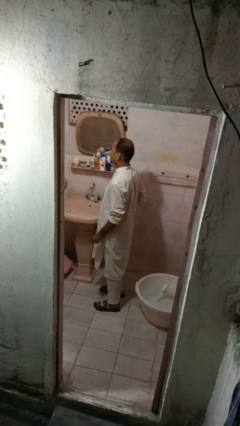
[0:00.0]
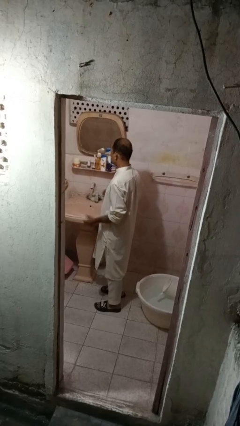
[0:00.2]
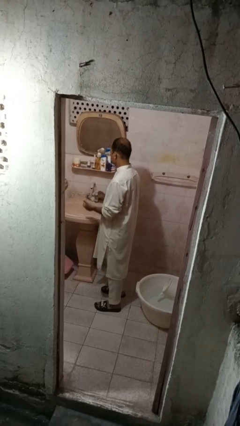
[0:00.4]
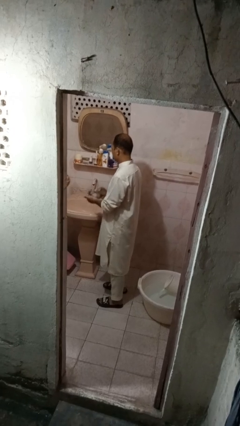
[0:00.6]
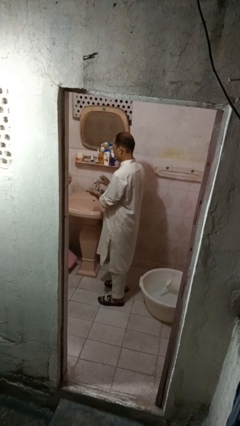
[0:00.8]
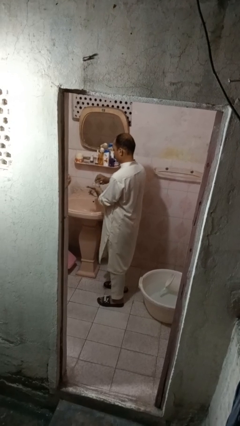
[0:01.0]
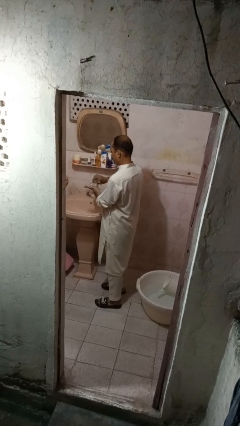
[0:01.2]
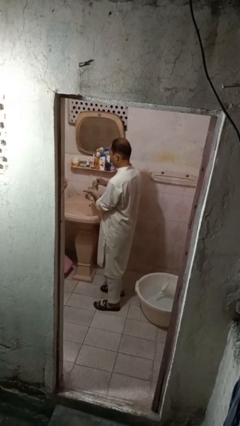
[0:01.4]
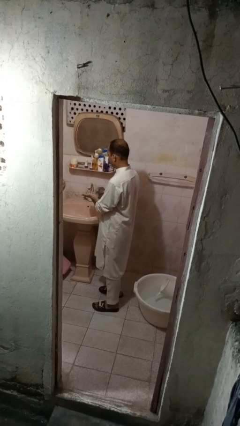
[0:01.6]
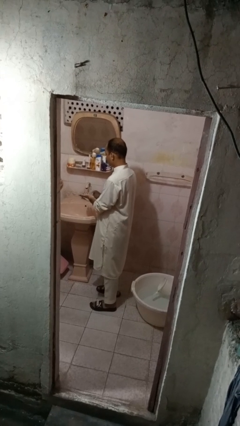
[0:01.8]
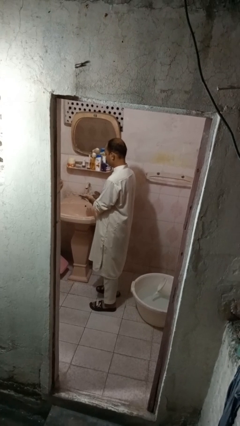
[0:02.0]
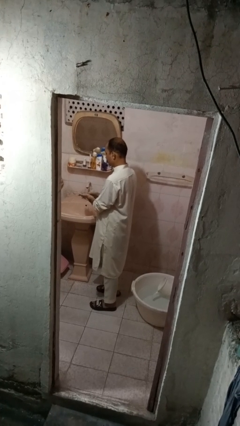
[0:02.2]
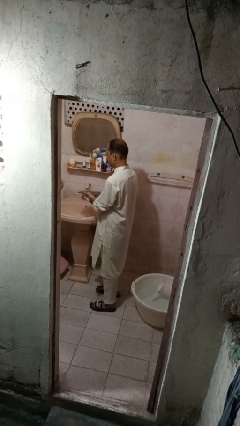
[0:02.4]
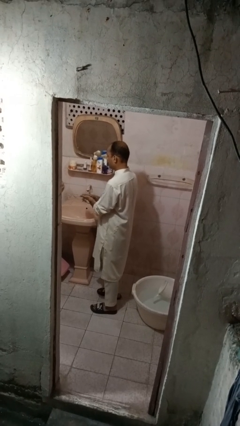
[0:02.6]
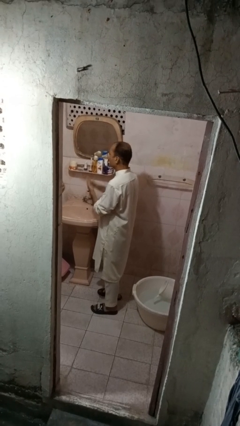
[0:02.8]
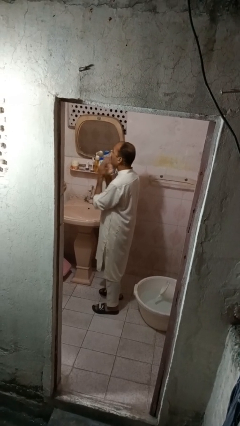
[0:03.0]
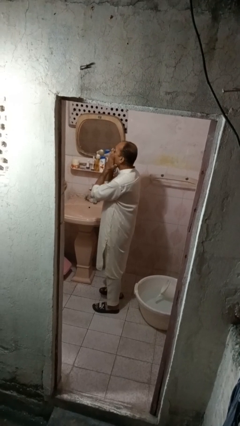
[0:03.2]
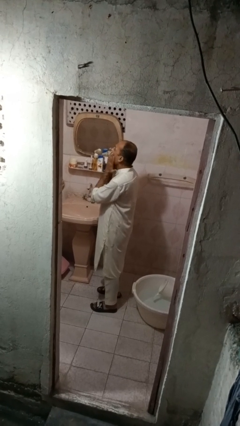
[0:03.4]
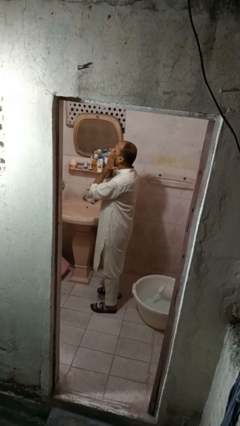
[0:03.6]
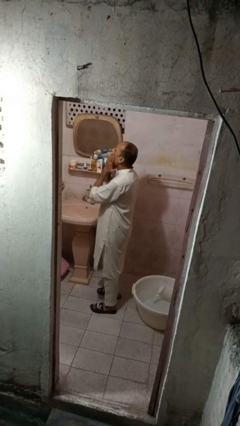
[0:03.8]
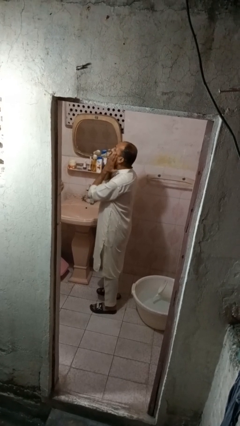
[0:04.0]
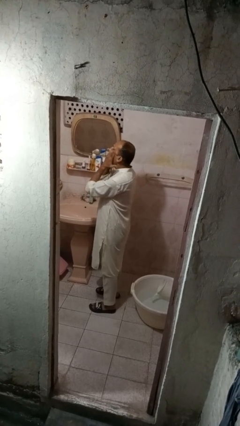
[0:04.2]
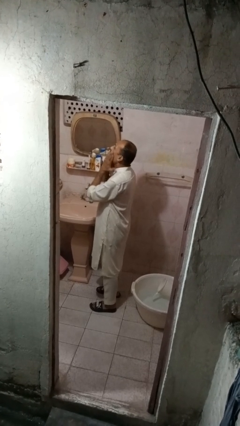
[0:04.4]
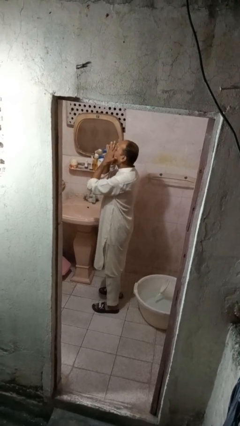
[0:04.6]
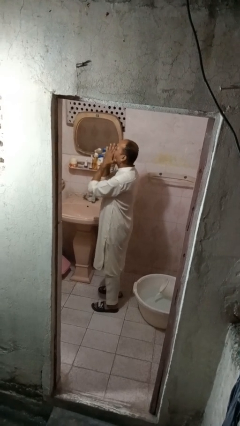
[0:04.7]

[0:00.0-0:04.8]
person applies facial moisturizer

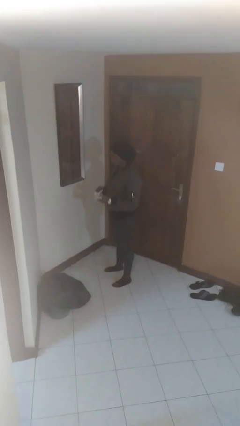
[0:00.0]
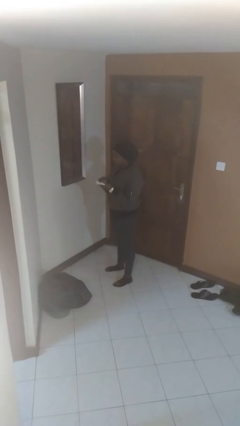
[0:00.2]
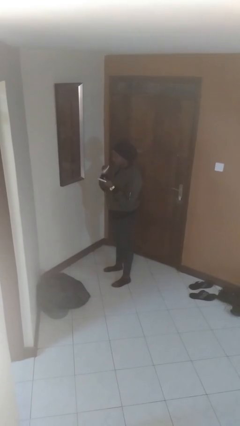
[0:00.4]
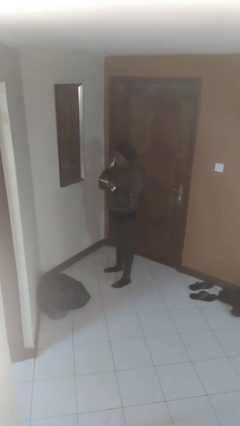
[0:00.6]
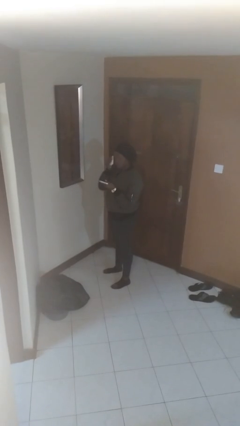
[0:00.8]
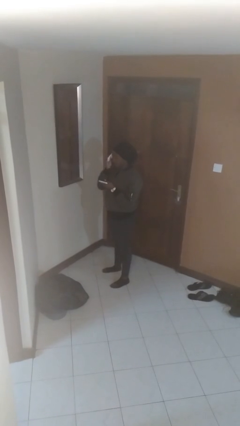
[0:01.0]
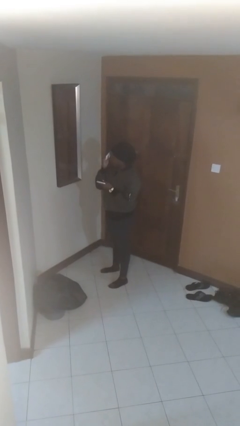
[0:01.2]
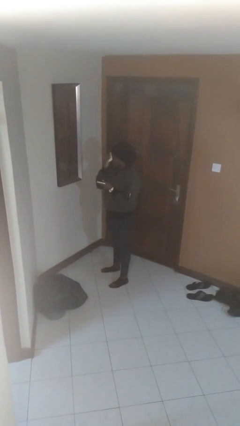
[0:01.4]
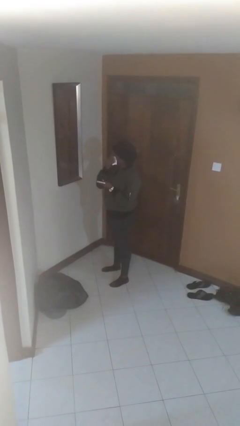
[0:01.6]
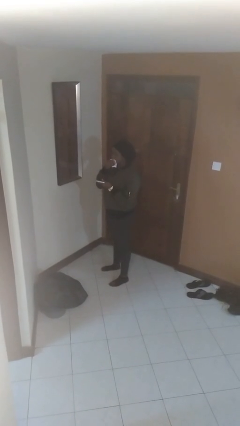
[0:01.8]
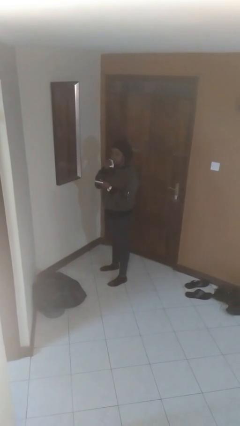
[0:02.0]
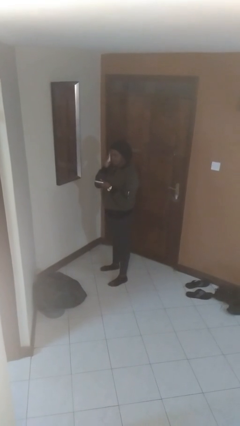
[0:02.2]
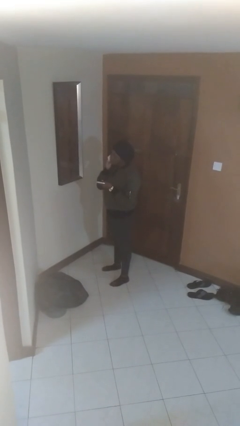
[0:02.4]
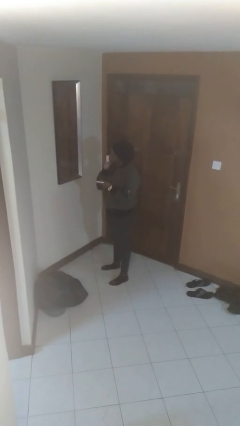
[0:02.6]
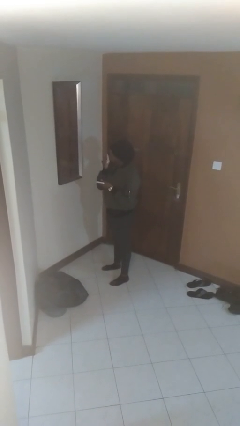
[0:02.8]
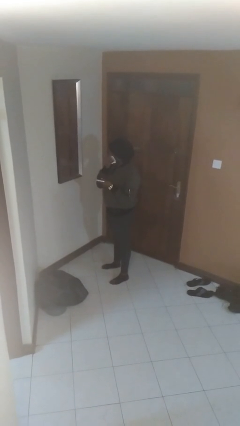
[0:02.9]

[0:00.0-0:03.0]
person applies foundation makeup

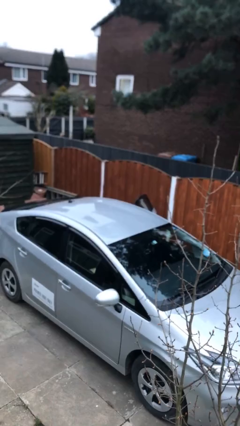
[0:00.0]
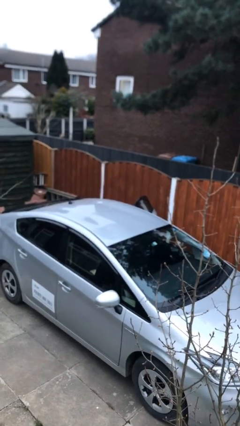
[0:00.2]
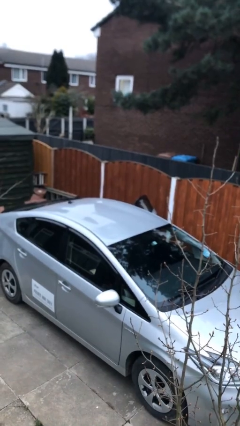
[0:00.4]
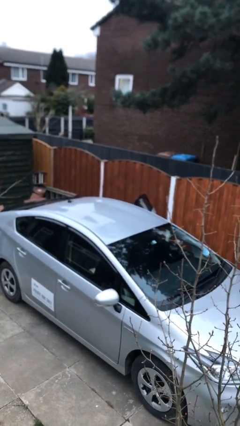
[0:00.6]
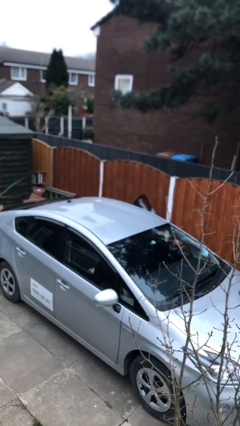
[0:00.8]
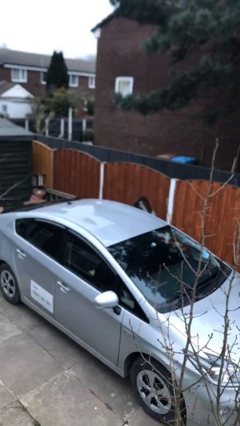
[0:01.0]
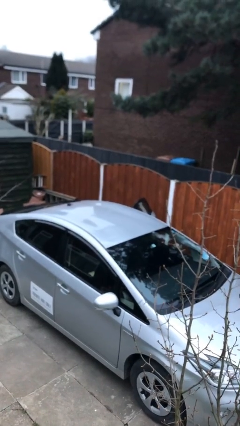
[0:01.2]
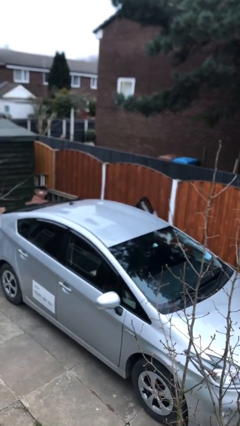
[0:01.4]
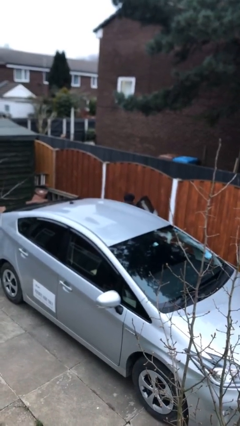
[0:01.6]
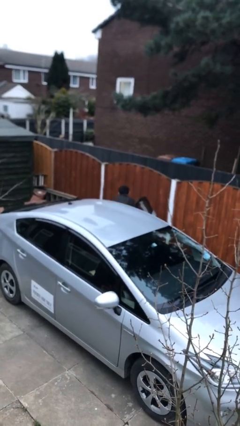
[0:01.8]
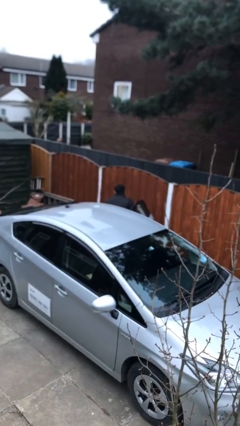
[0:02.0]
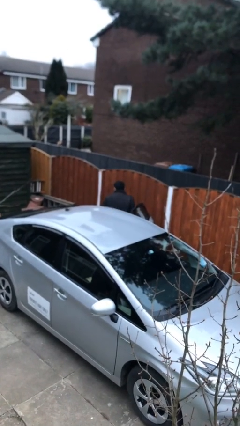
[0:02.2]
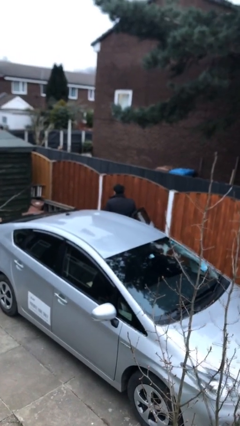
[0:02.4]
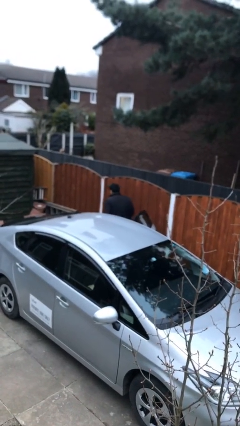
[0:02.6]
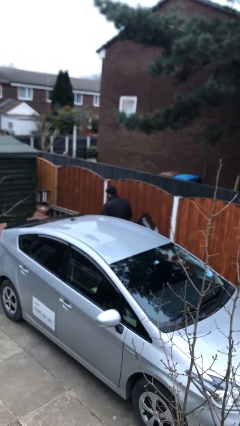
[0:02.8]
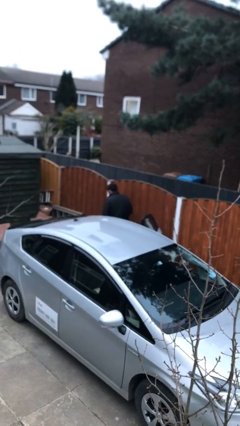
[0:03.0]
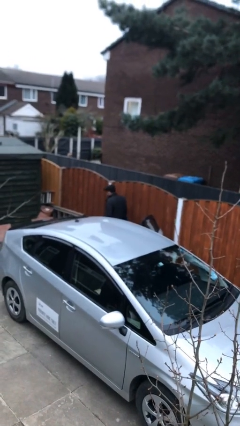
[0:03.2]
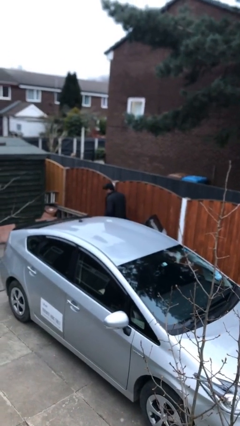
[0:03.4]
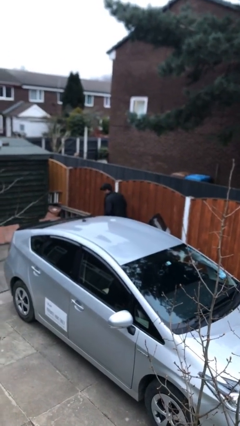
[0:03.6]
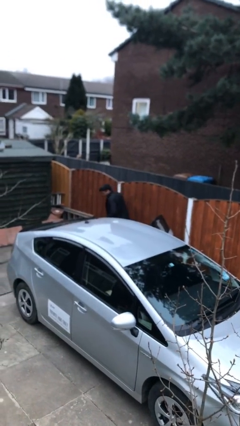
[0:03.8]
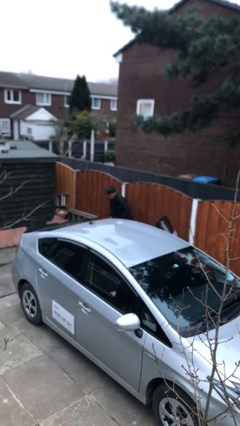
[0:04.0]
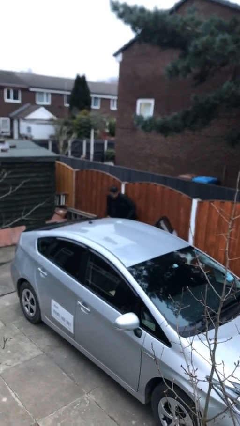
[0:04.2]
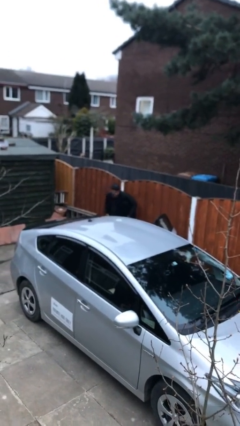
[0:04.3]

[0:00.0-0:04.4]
person exits car

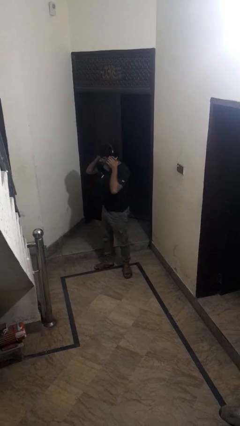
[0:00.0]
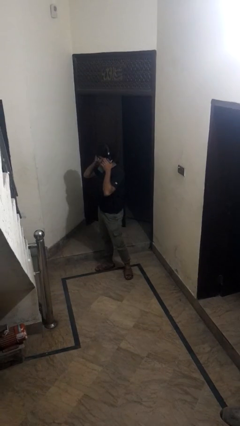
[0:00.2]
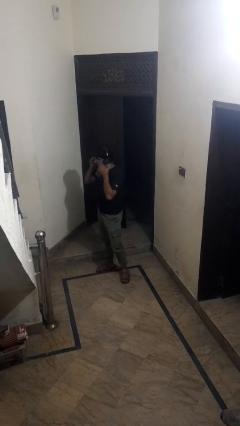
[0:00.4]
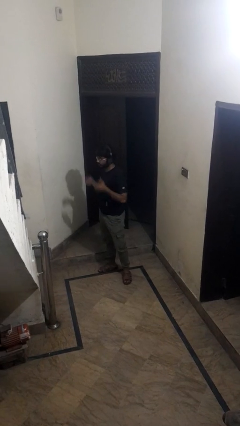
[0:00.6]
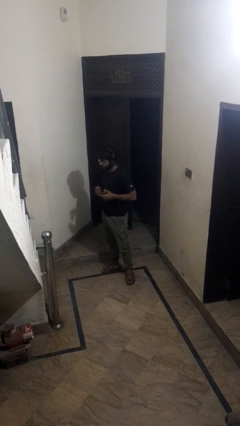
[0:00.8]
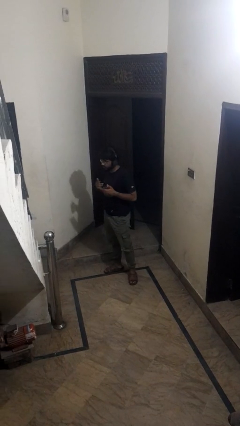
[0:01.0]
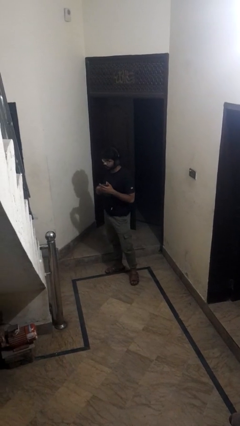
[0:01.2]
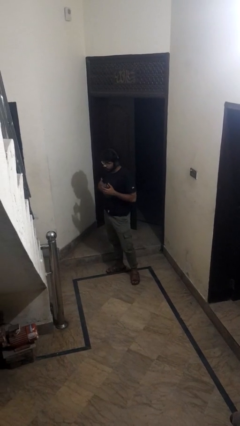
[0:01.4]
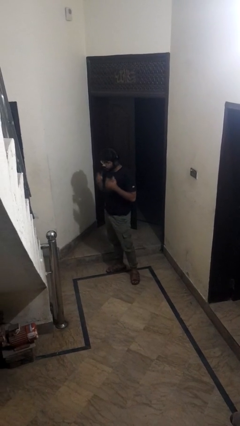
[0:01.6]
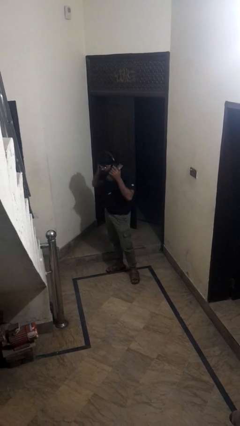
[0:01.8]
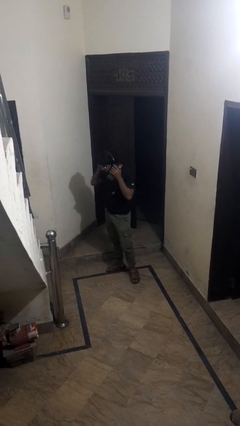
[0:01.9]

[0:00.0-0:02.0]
person puts on headphones

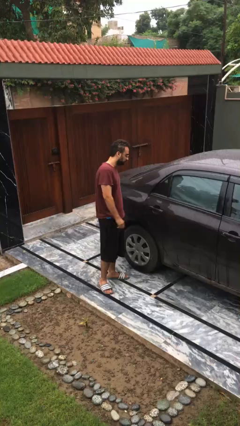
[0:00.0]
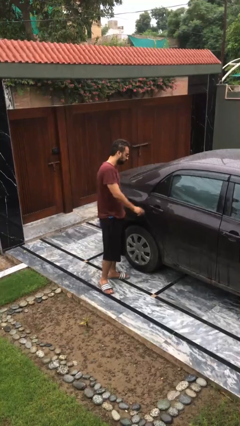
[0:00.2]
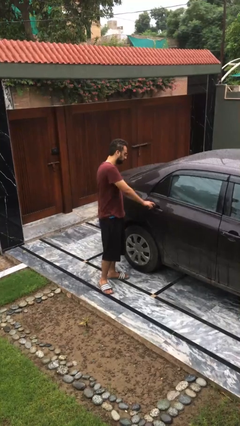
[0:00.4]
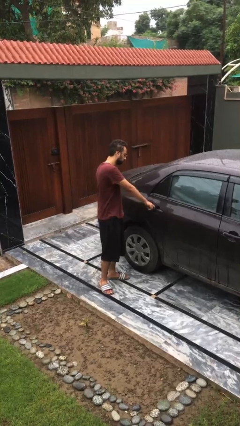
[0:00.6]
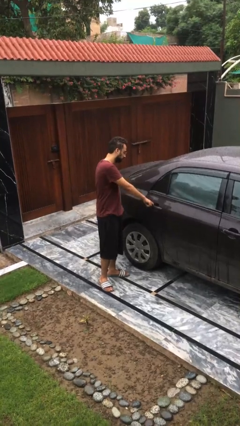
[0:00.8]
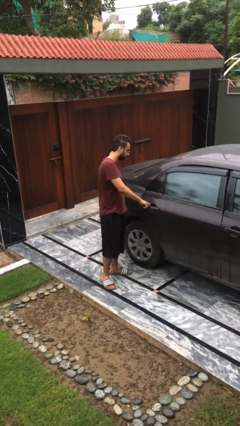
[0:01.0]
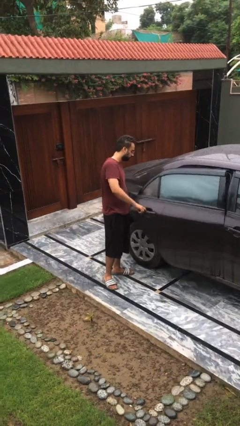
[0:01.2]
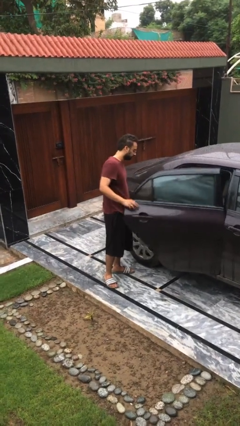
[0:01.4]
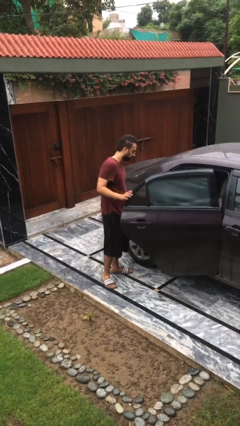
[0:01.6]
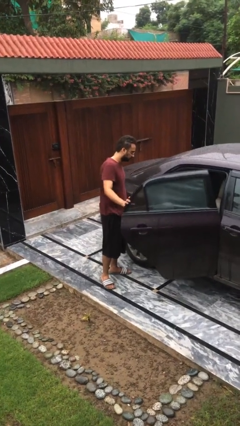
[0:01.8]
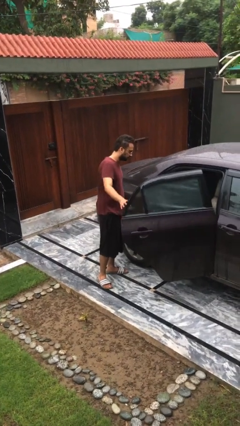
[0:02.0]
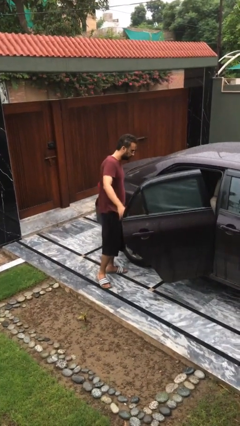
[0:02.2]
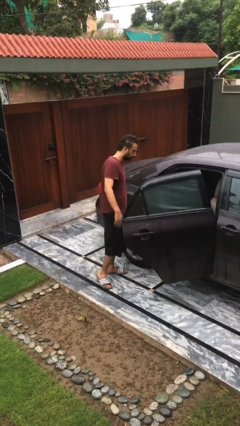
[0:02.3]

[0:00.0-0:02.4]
person opens car door

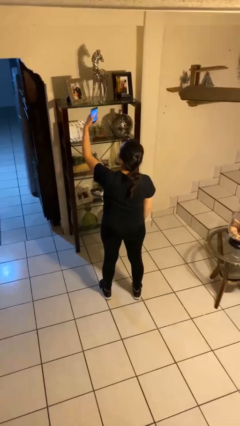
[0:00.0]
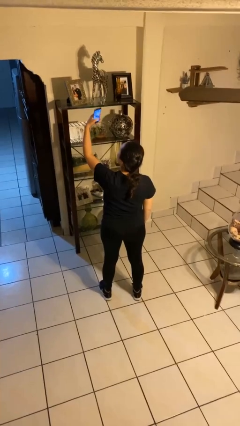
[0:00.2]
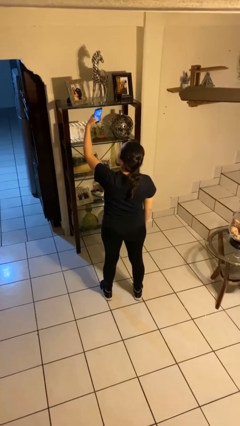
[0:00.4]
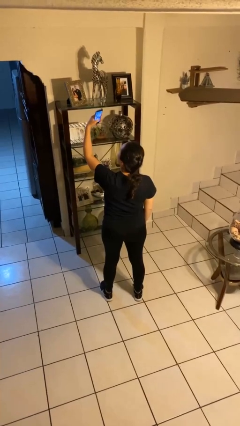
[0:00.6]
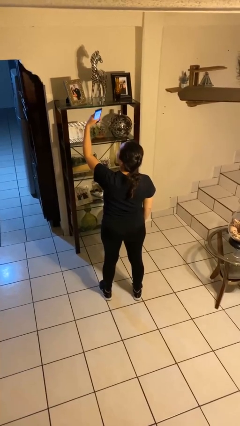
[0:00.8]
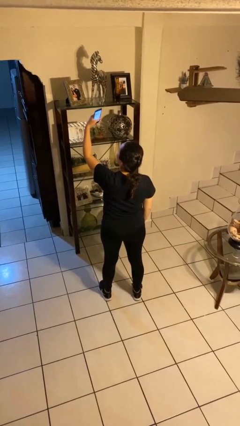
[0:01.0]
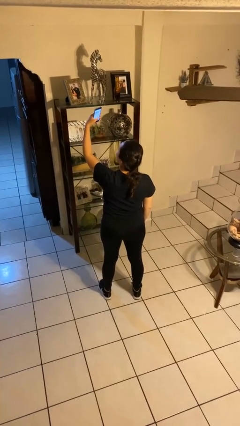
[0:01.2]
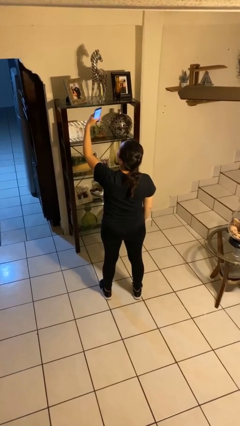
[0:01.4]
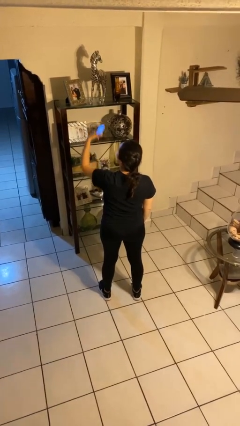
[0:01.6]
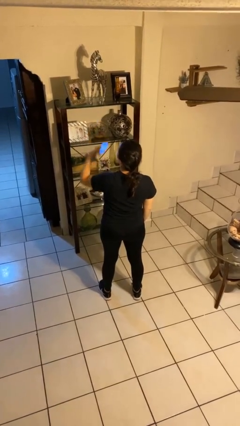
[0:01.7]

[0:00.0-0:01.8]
person takes selfie
